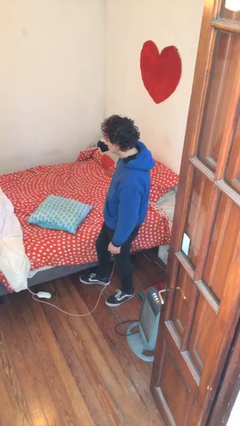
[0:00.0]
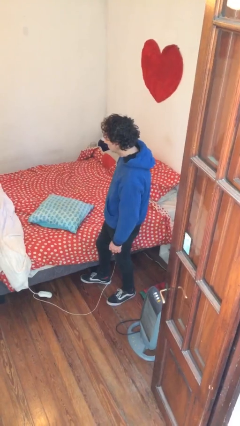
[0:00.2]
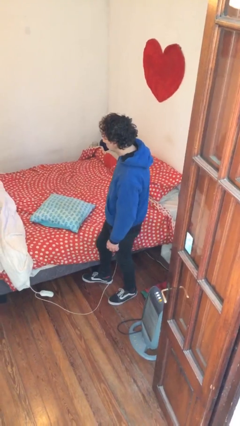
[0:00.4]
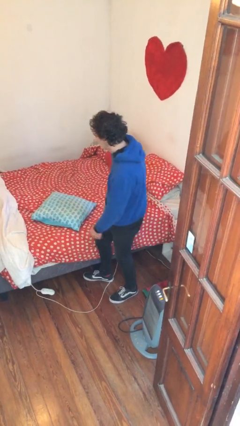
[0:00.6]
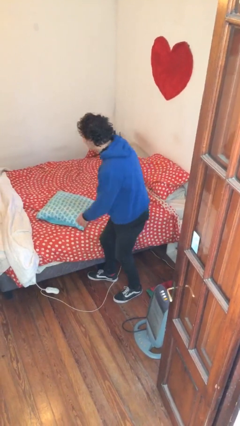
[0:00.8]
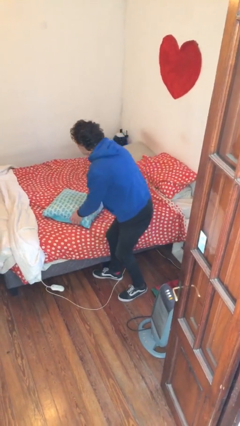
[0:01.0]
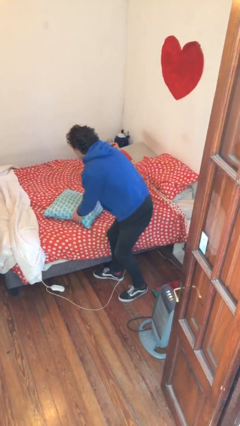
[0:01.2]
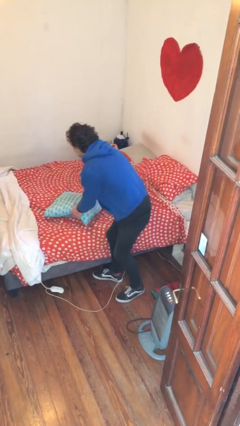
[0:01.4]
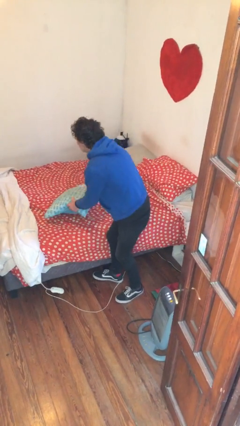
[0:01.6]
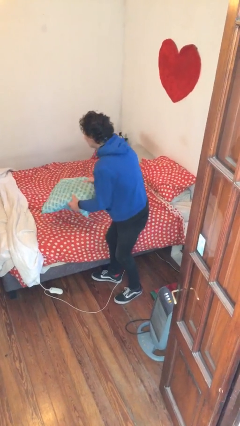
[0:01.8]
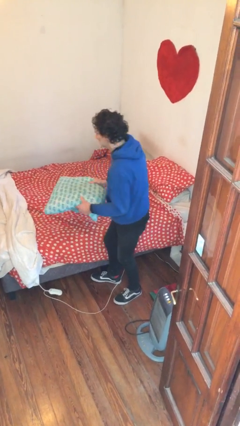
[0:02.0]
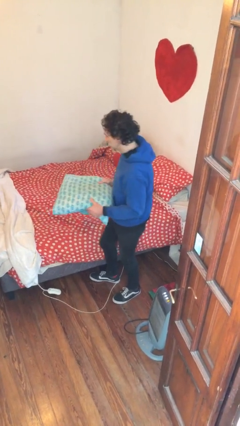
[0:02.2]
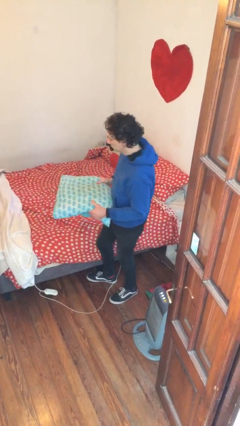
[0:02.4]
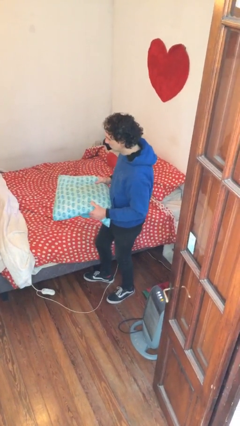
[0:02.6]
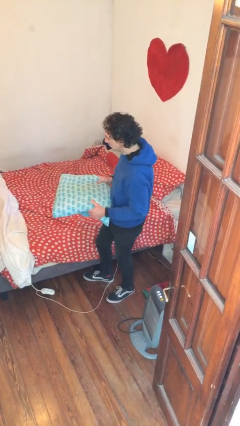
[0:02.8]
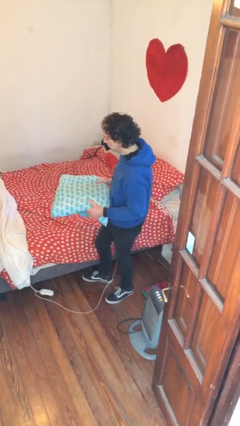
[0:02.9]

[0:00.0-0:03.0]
person picks up object from bed

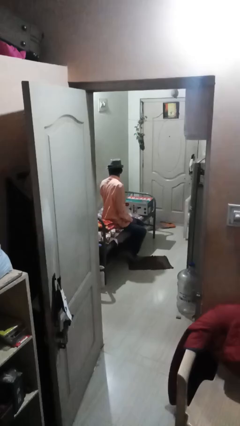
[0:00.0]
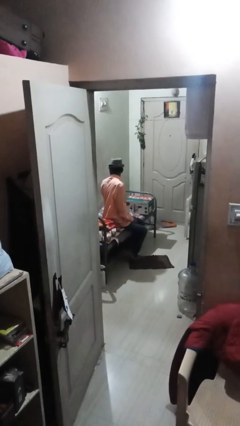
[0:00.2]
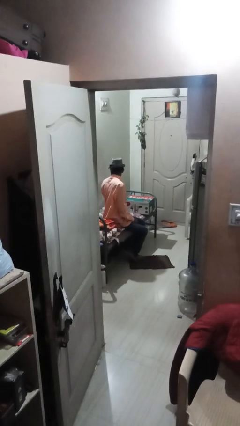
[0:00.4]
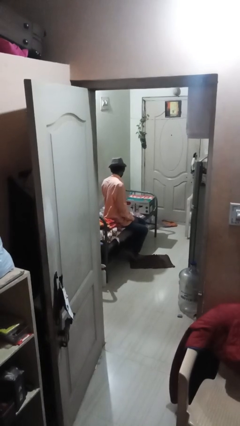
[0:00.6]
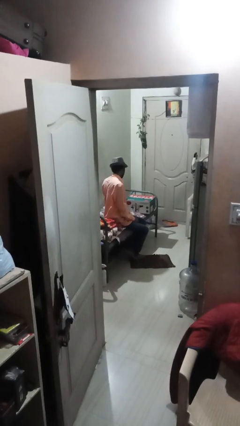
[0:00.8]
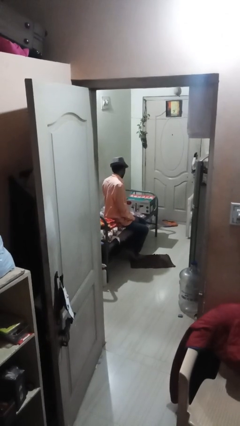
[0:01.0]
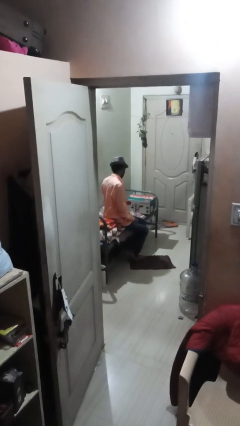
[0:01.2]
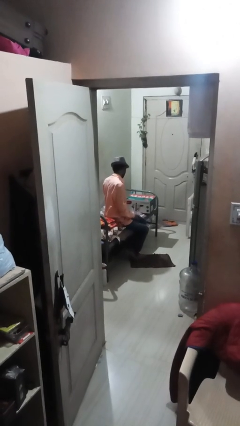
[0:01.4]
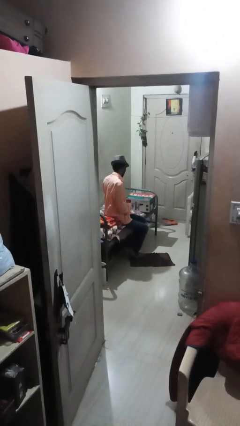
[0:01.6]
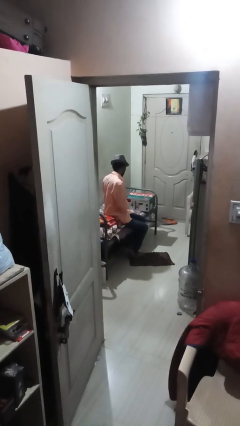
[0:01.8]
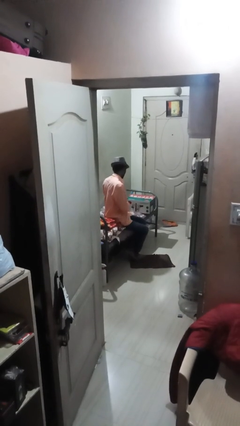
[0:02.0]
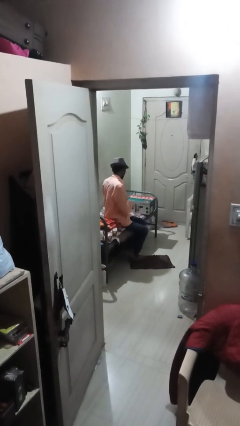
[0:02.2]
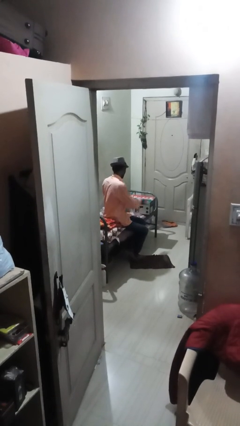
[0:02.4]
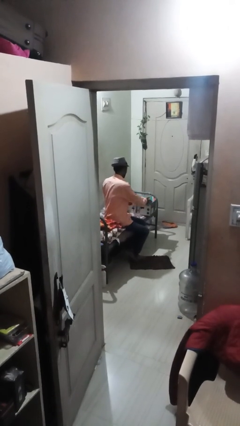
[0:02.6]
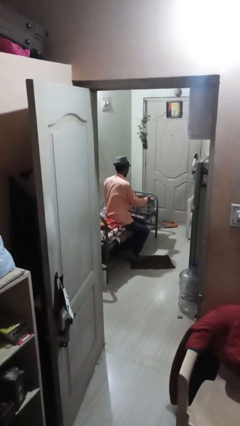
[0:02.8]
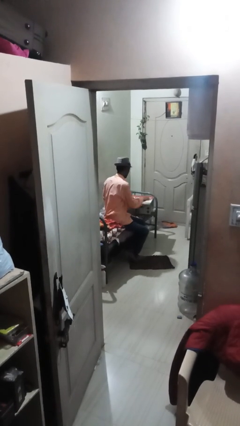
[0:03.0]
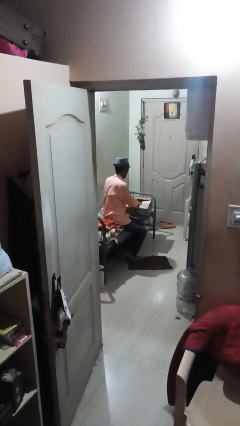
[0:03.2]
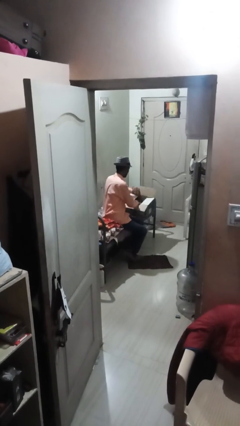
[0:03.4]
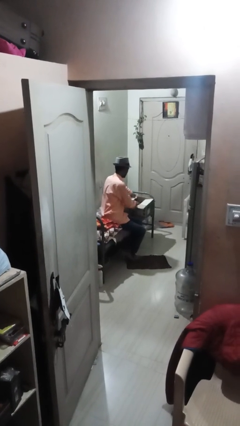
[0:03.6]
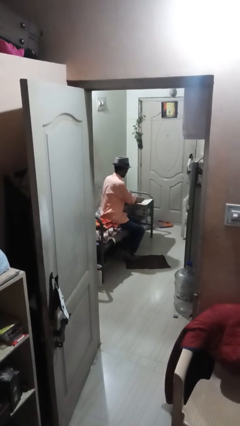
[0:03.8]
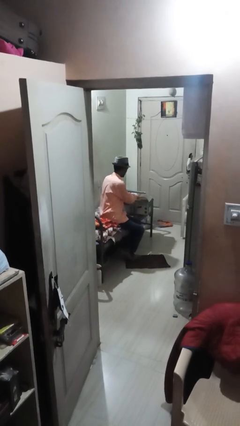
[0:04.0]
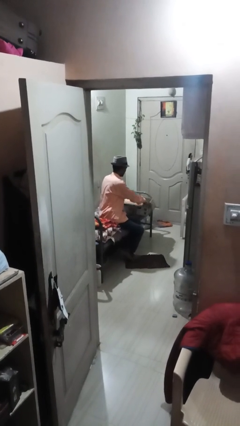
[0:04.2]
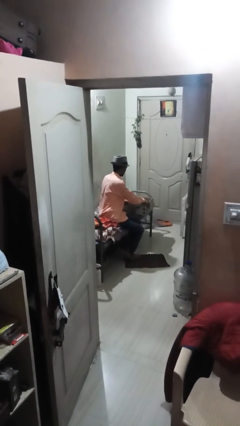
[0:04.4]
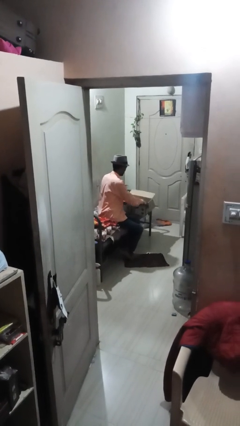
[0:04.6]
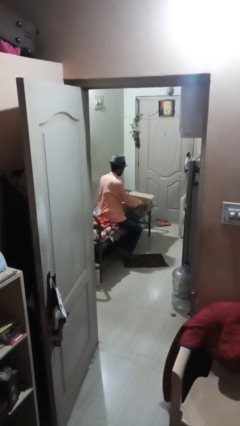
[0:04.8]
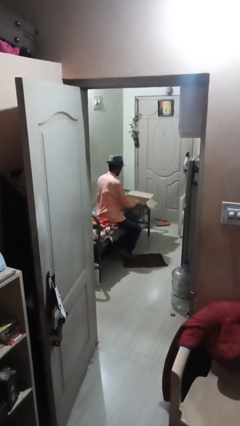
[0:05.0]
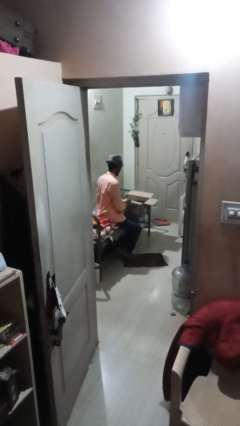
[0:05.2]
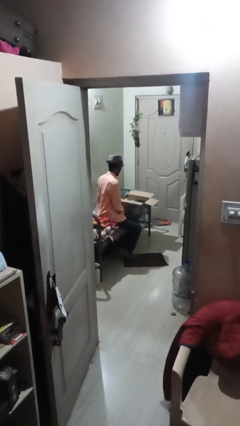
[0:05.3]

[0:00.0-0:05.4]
person opens box

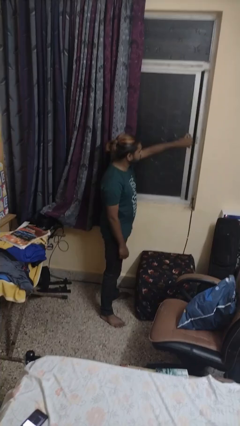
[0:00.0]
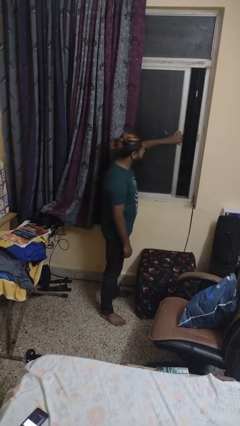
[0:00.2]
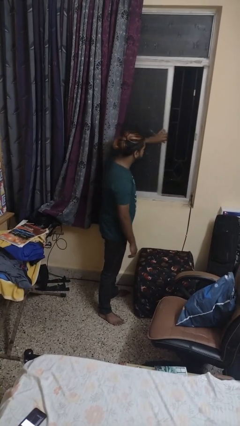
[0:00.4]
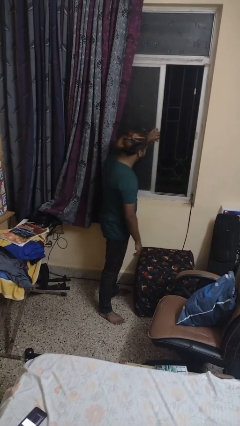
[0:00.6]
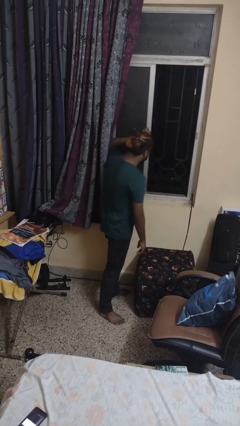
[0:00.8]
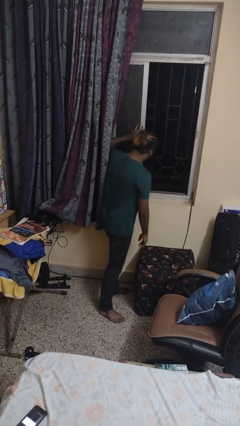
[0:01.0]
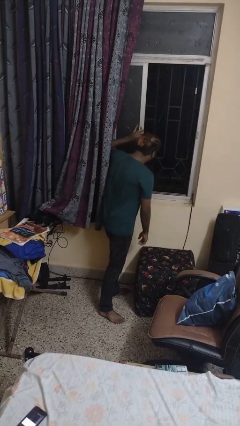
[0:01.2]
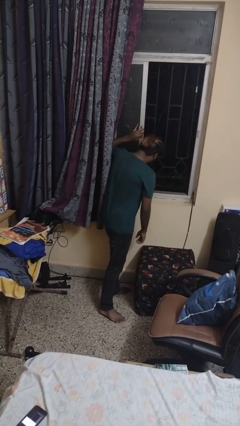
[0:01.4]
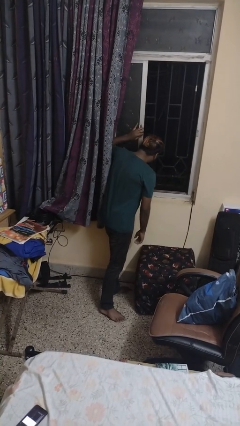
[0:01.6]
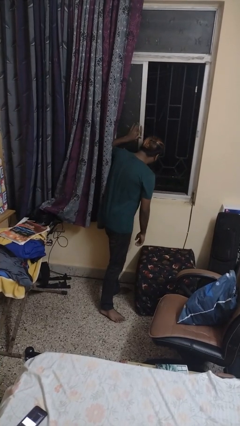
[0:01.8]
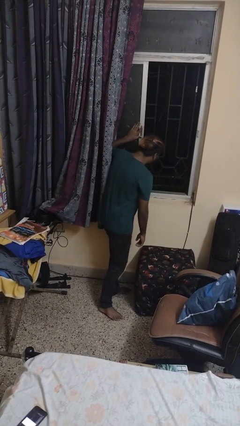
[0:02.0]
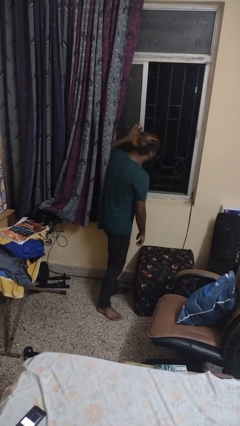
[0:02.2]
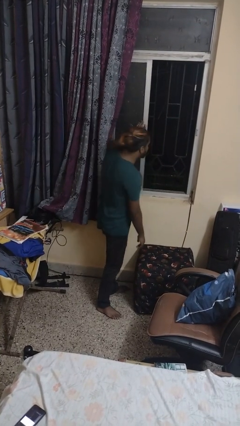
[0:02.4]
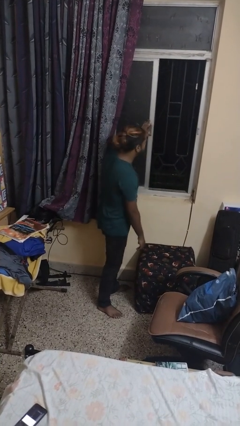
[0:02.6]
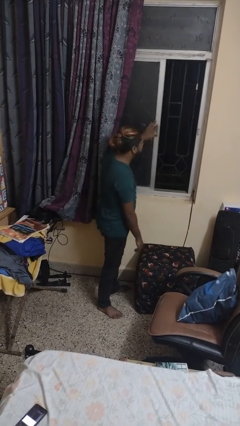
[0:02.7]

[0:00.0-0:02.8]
person opens sliding door

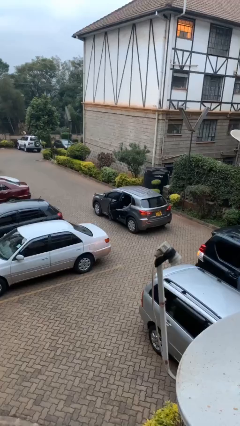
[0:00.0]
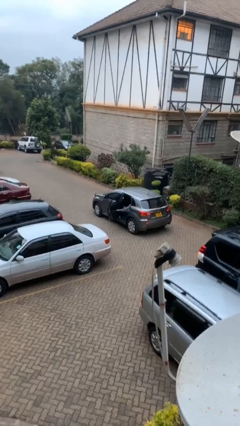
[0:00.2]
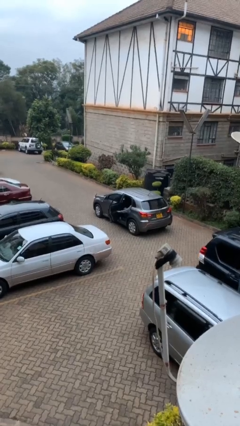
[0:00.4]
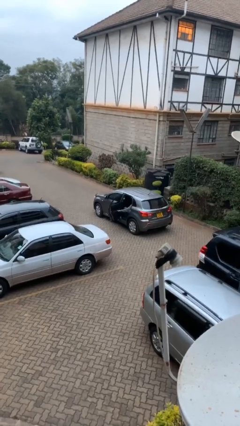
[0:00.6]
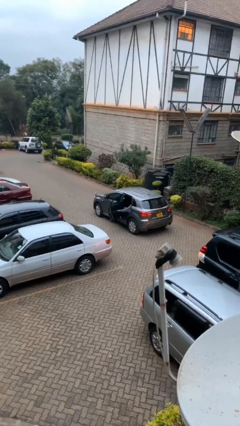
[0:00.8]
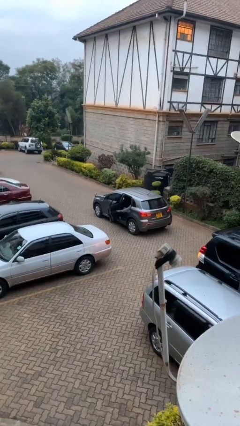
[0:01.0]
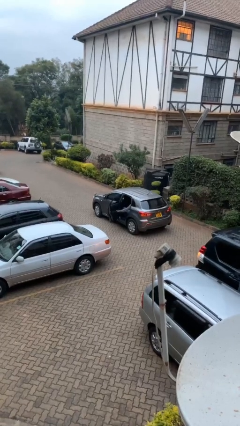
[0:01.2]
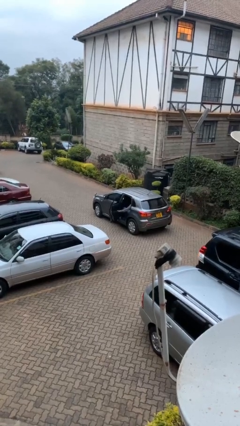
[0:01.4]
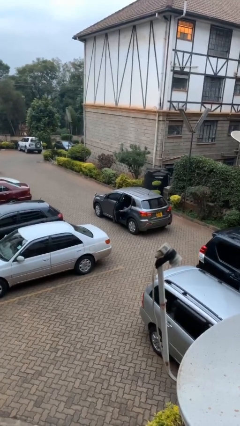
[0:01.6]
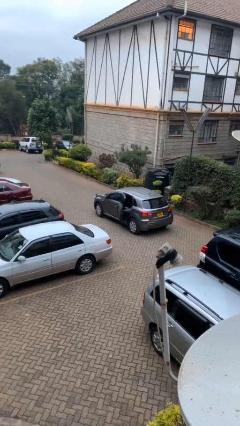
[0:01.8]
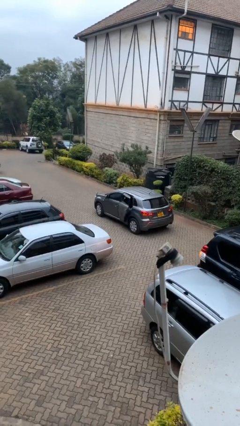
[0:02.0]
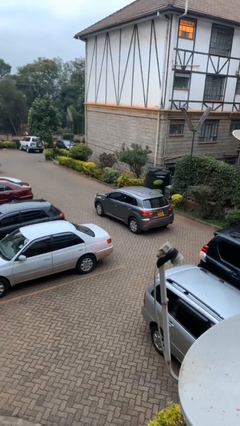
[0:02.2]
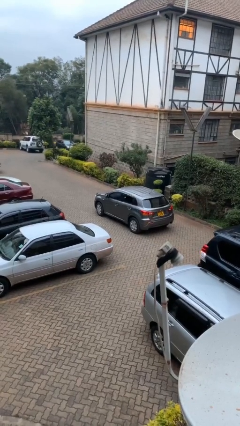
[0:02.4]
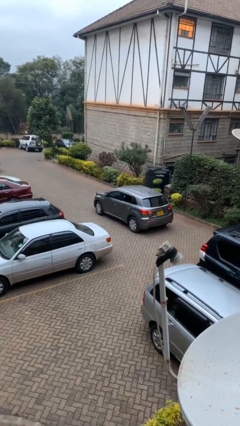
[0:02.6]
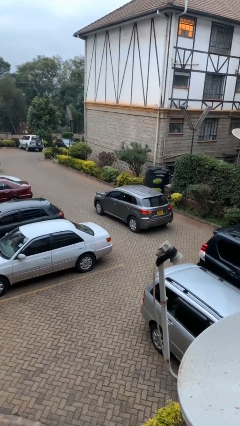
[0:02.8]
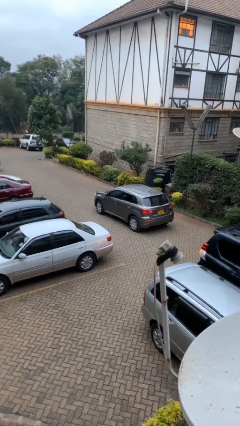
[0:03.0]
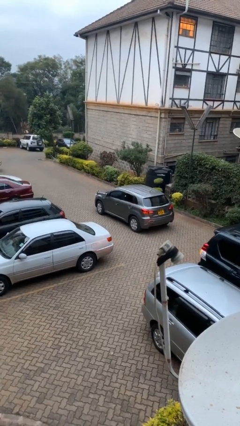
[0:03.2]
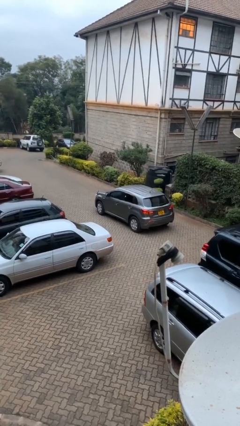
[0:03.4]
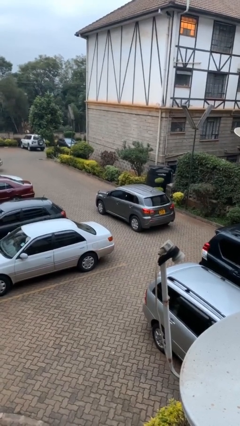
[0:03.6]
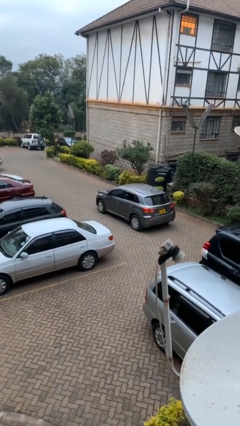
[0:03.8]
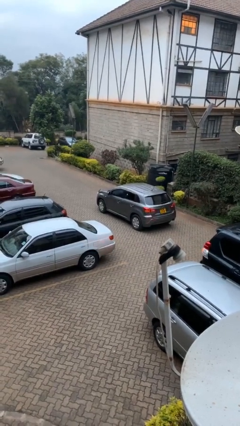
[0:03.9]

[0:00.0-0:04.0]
person closes car door

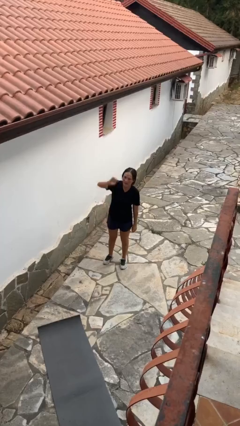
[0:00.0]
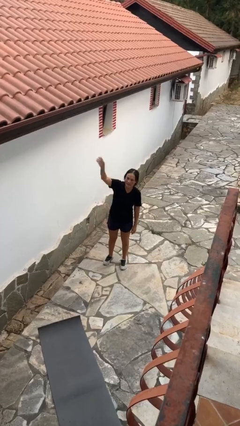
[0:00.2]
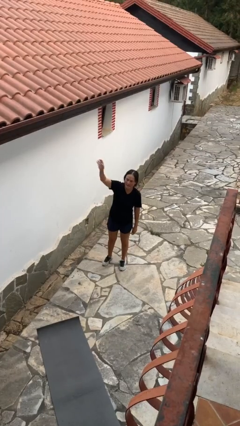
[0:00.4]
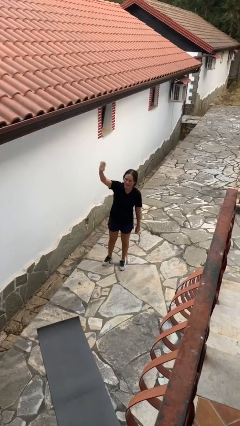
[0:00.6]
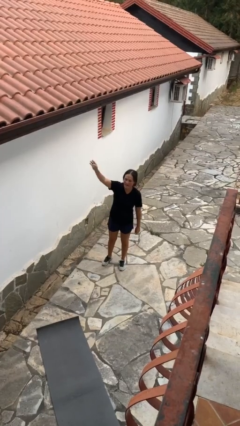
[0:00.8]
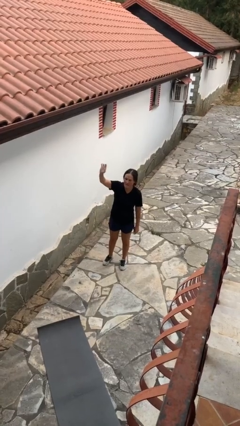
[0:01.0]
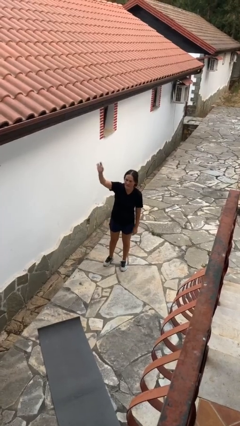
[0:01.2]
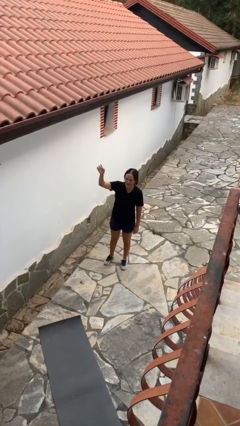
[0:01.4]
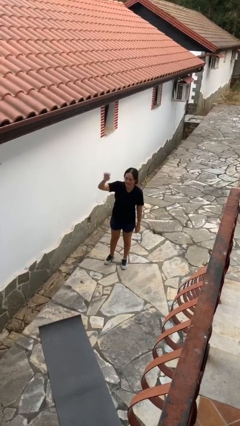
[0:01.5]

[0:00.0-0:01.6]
person gestures raise hand

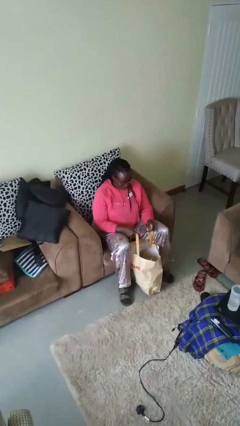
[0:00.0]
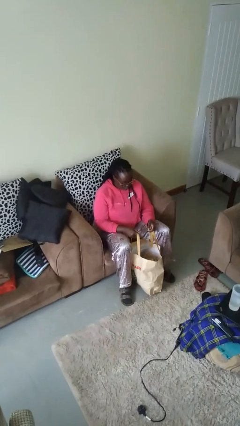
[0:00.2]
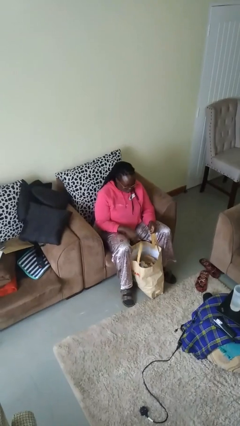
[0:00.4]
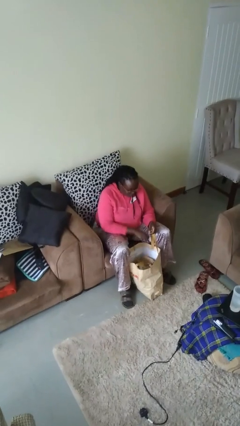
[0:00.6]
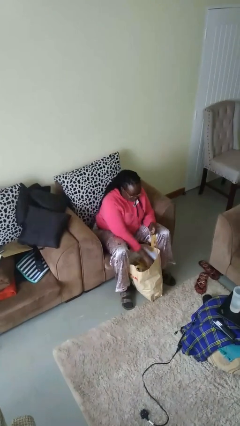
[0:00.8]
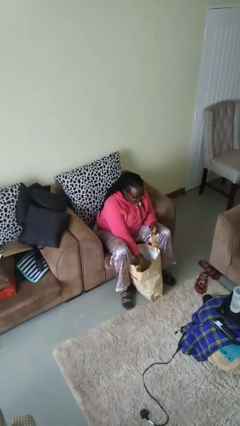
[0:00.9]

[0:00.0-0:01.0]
person searches in bag
